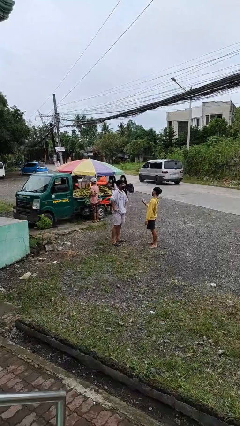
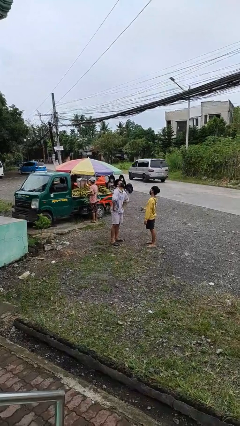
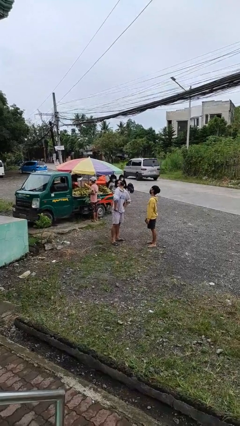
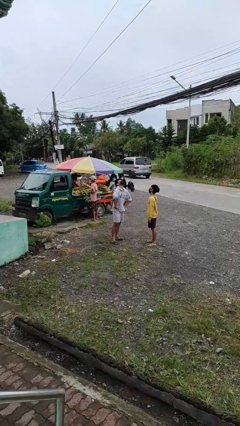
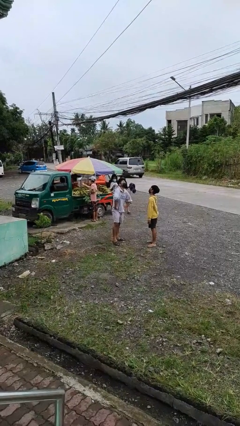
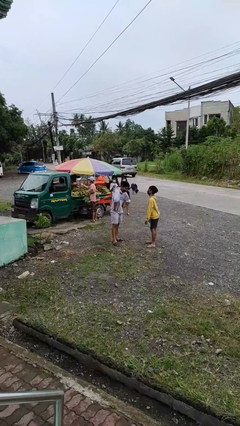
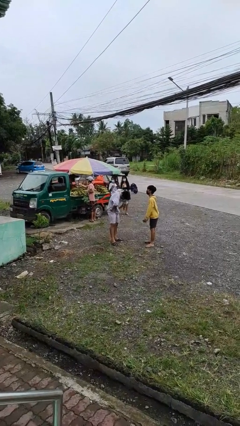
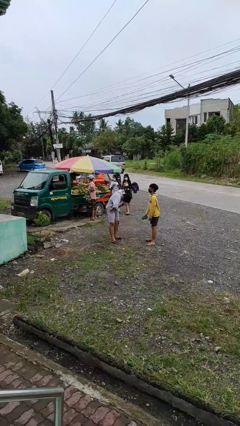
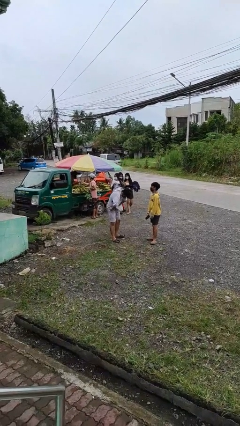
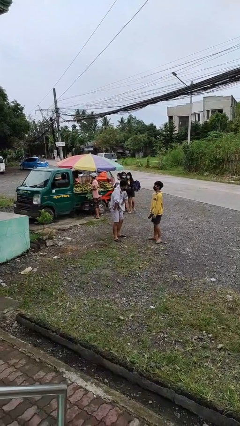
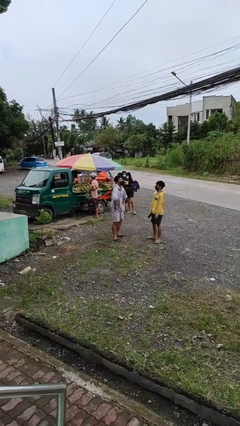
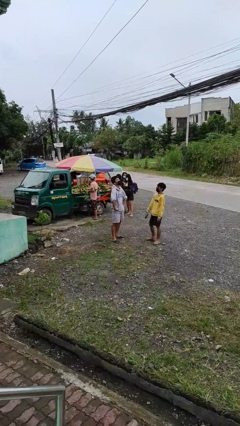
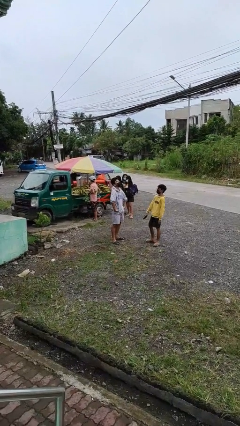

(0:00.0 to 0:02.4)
person laughs with person

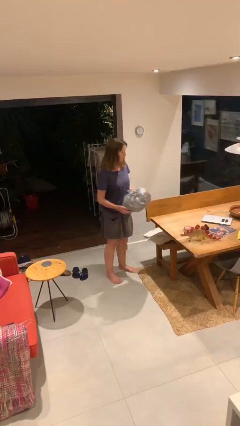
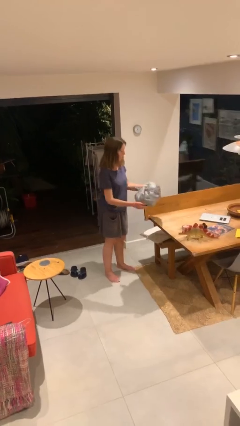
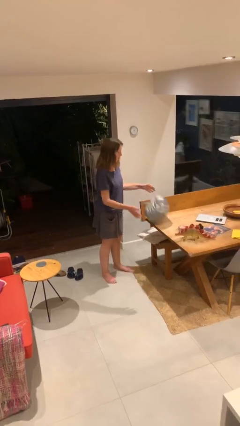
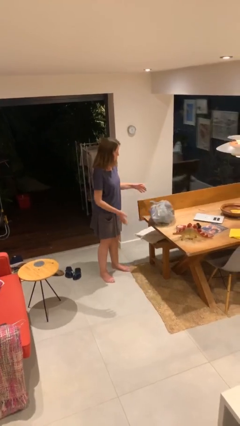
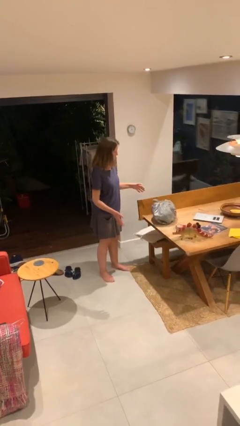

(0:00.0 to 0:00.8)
person puts down object on table

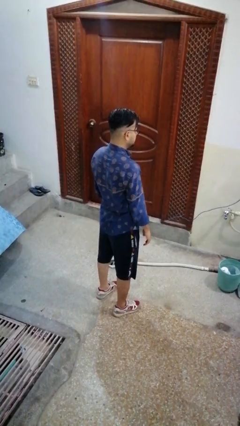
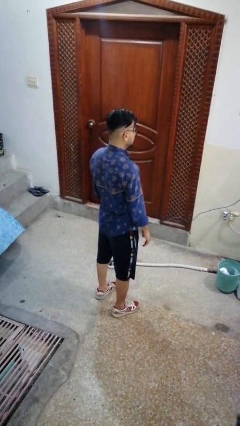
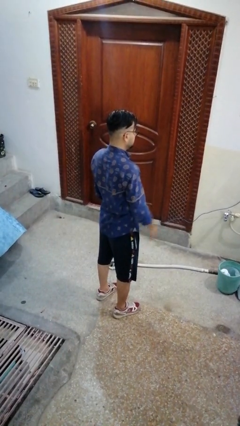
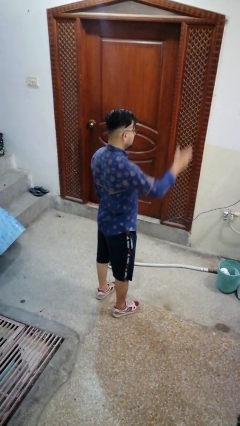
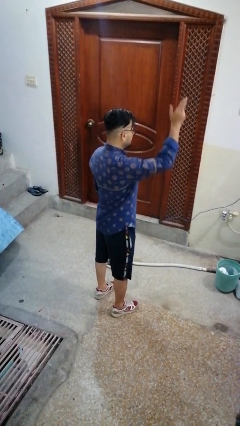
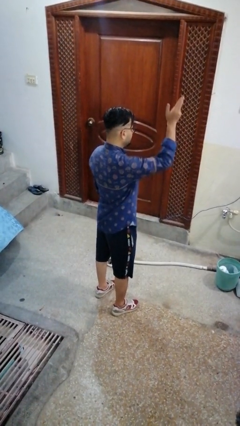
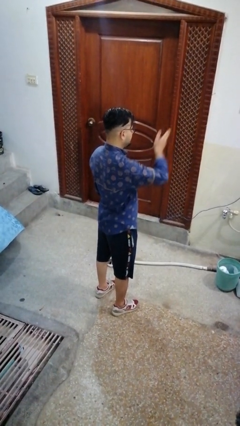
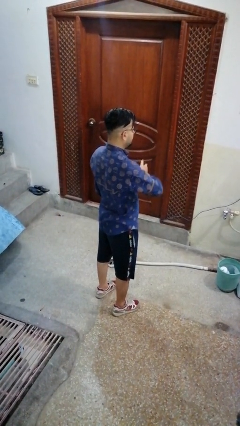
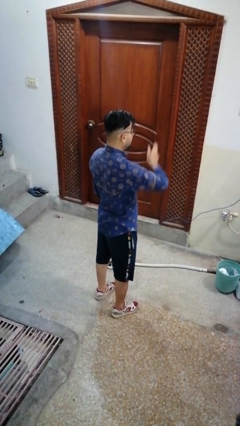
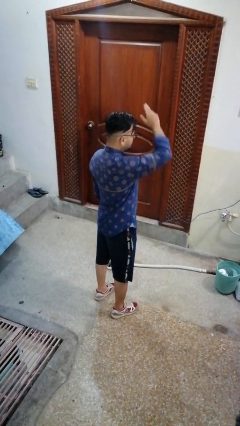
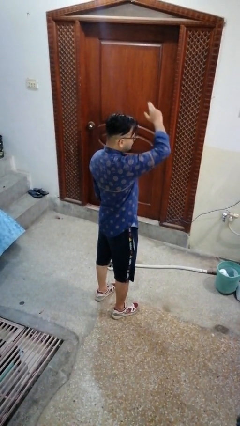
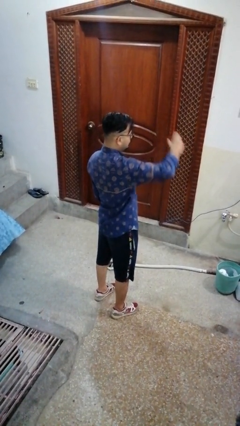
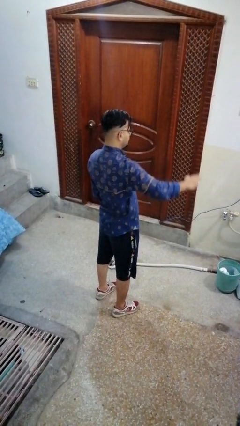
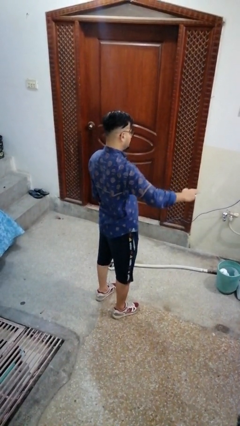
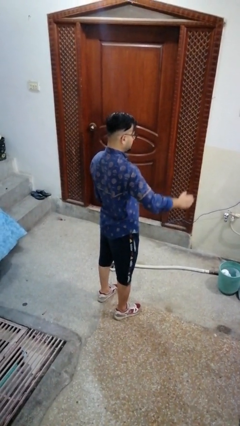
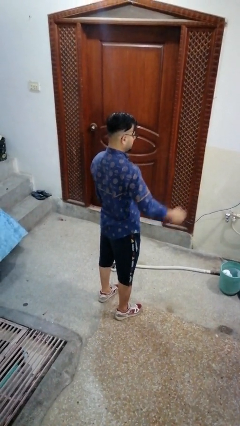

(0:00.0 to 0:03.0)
person gestures cut

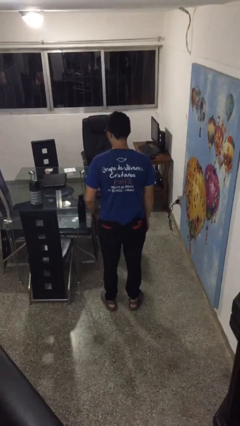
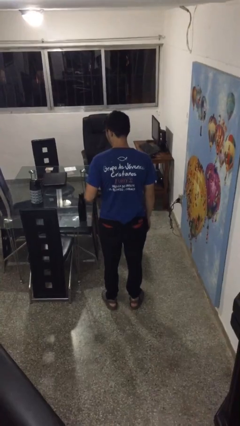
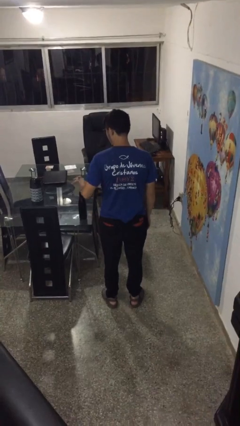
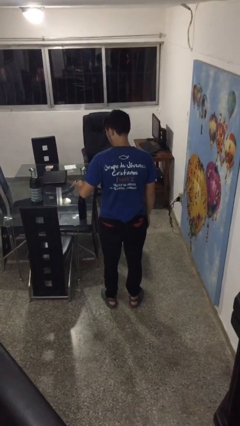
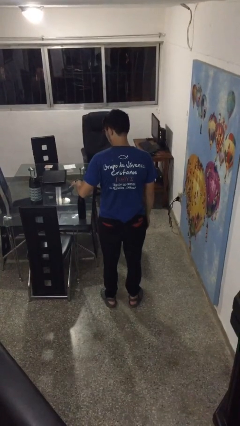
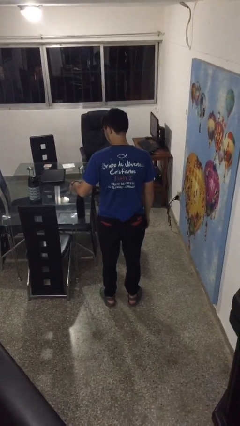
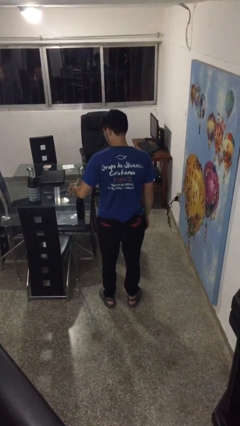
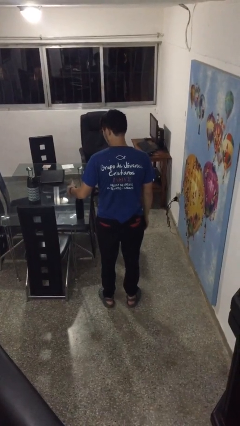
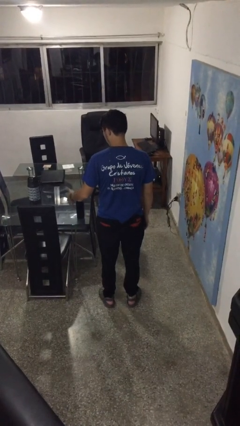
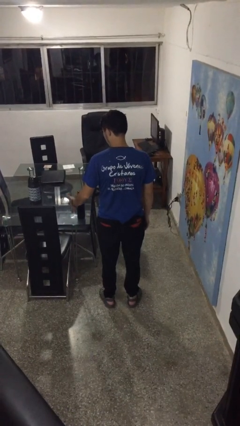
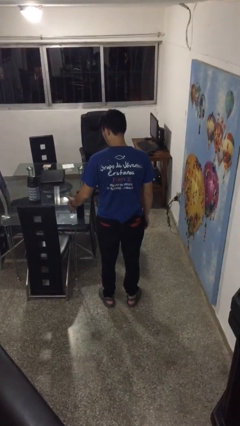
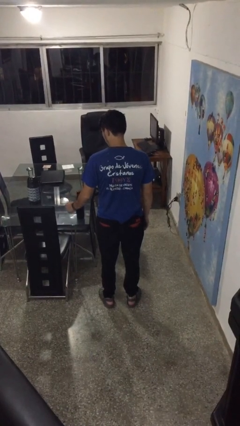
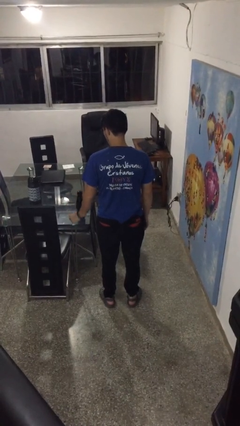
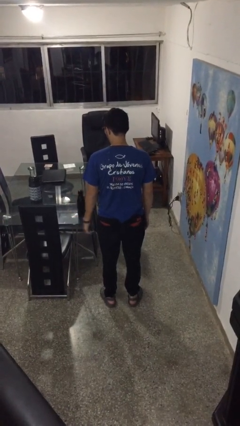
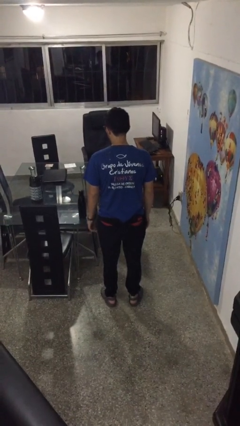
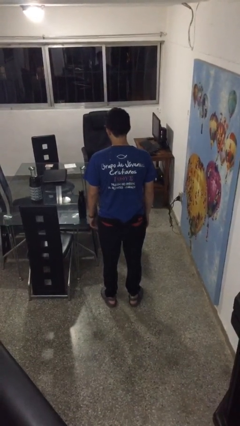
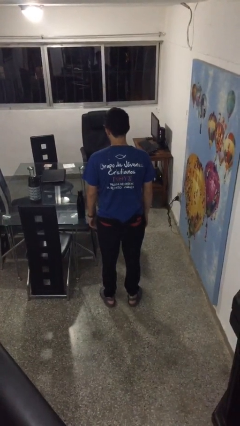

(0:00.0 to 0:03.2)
person waves hand over object

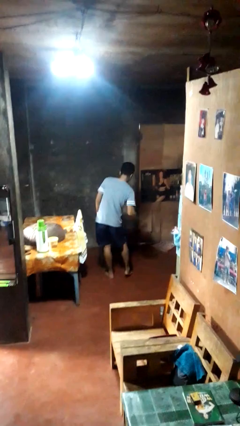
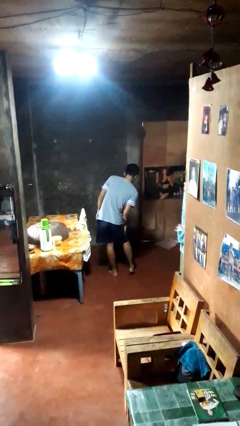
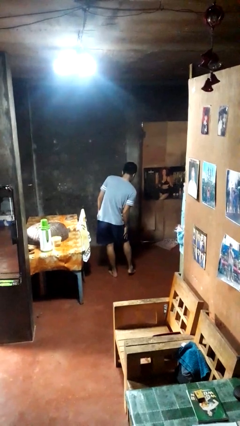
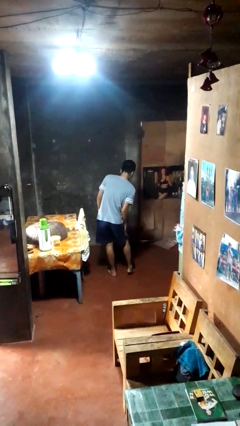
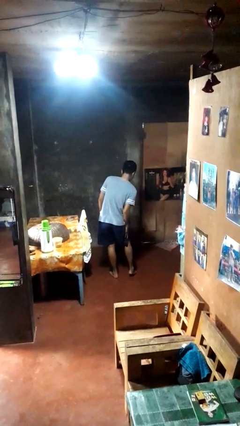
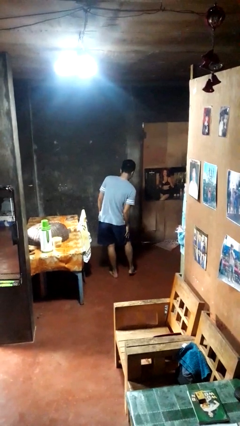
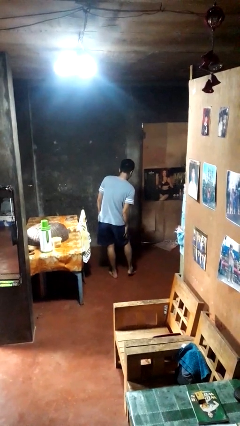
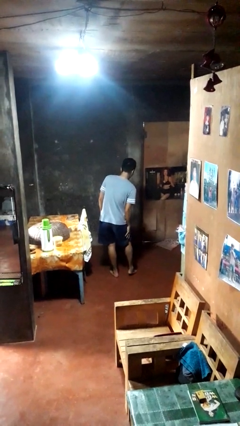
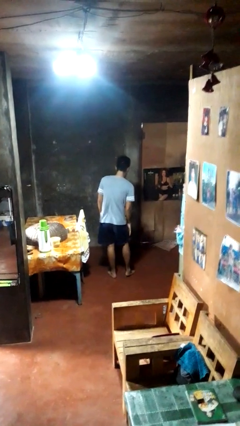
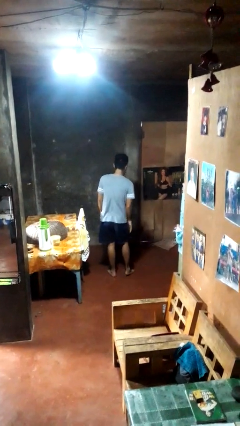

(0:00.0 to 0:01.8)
person swats bug

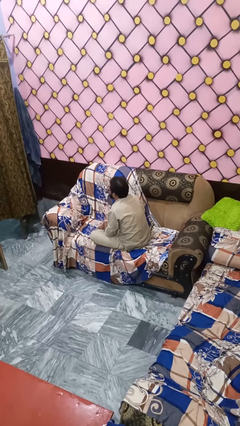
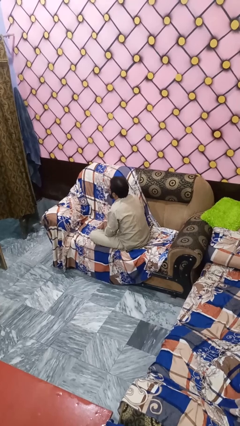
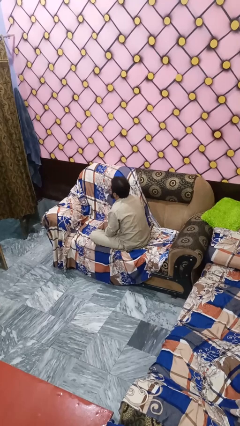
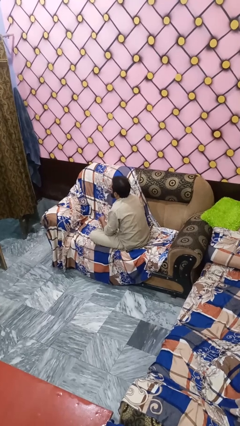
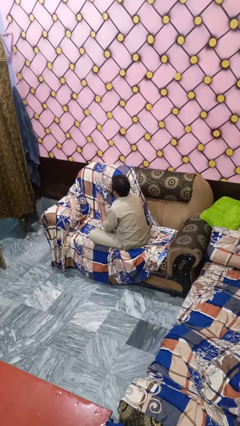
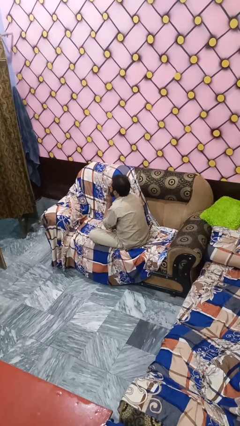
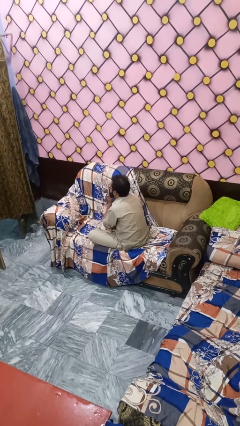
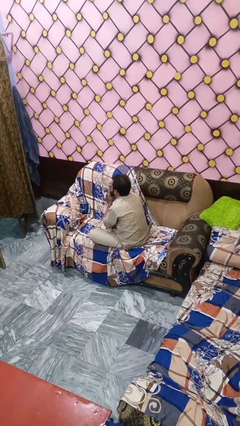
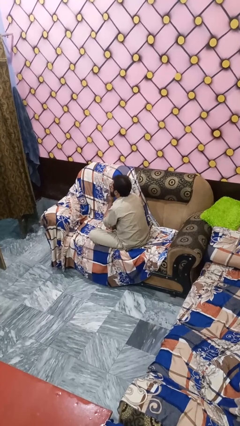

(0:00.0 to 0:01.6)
person gestures blow kiss

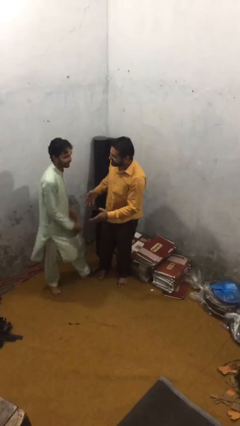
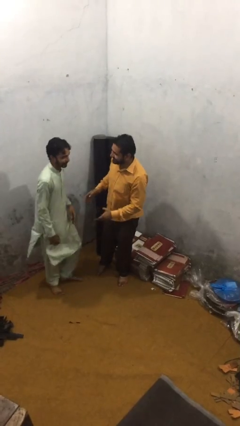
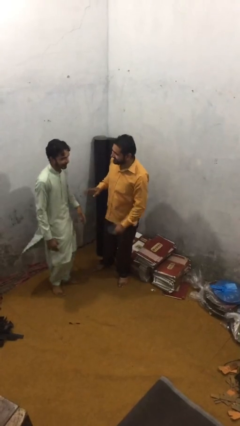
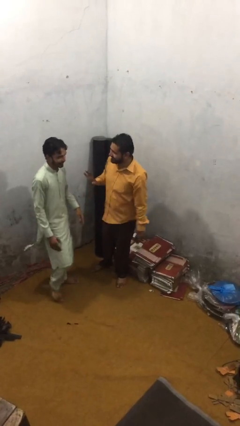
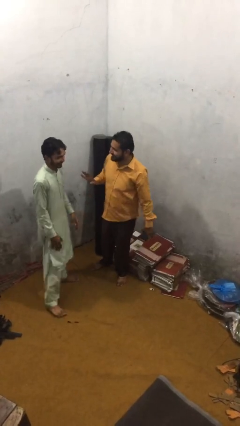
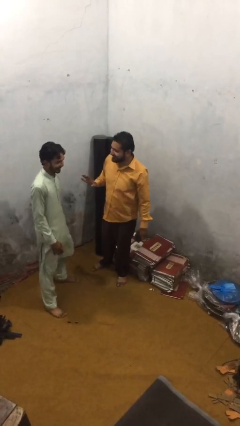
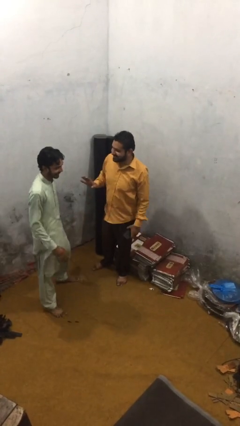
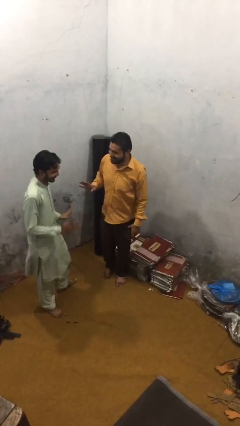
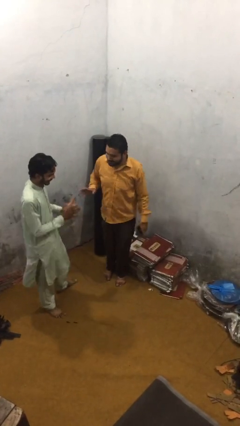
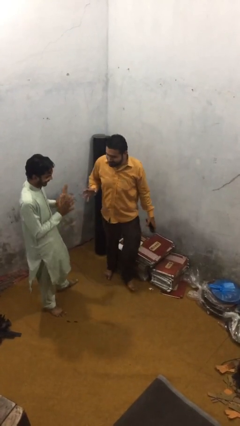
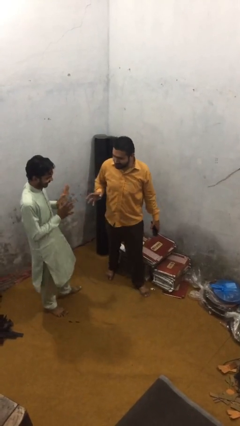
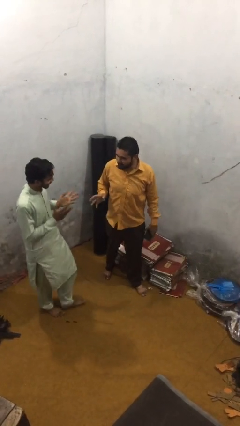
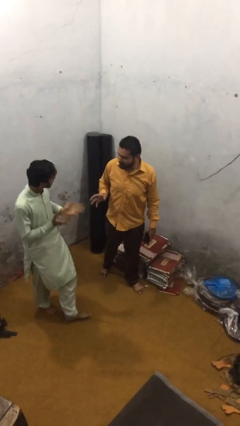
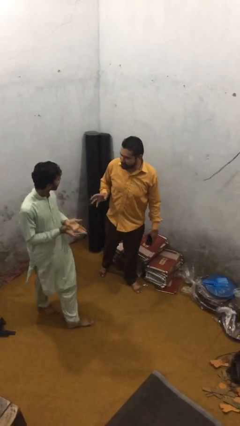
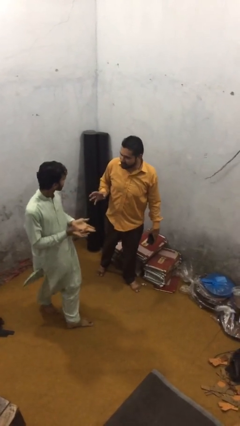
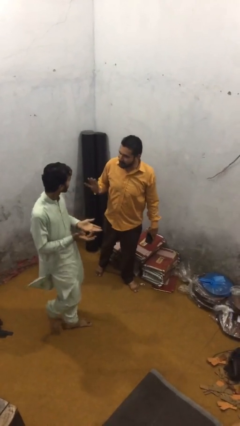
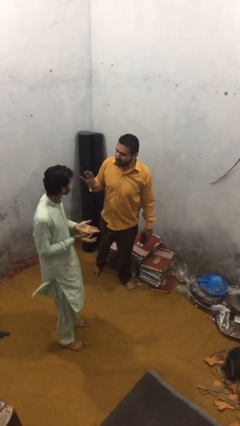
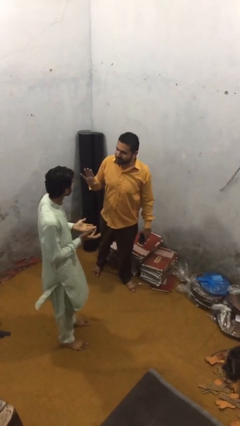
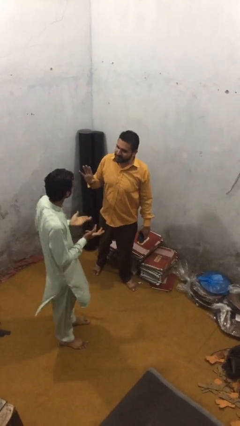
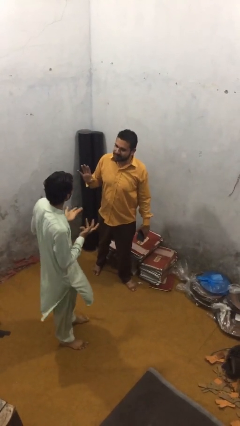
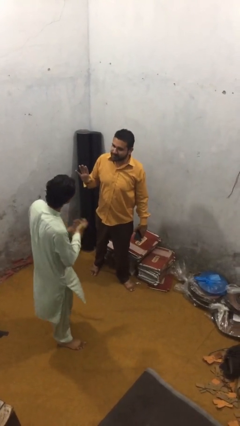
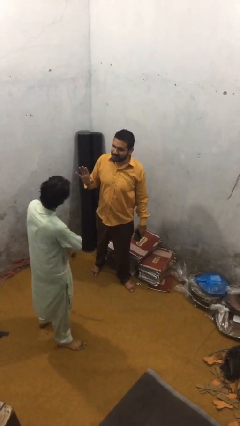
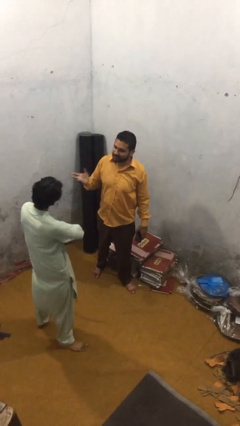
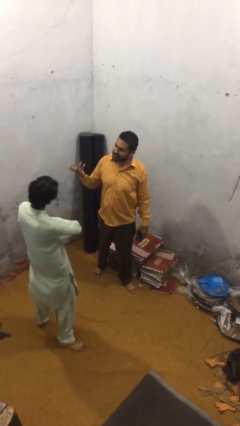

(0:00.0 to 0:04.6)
person talks to person
